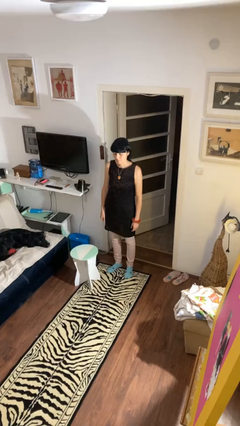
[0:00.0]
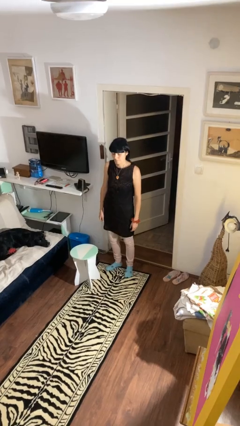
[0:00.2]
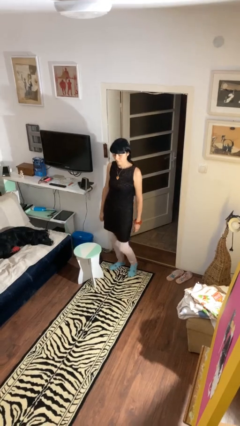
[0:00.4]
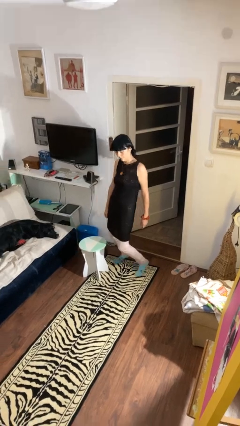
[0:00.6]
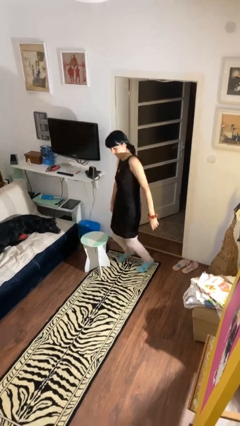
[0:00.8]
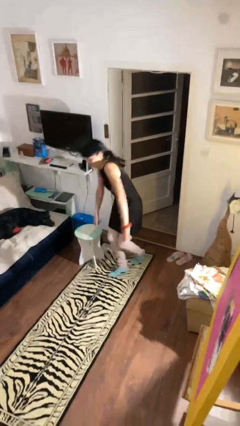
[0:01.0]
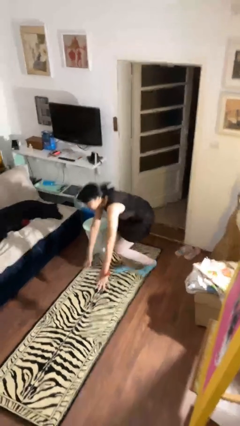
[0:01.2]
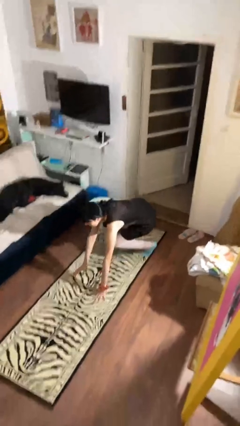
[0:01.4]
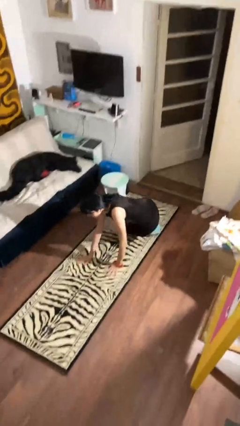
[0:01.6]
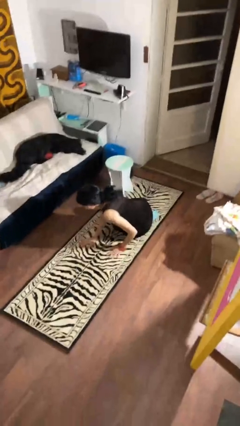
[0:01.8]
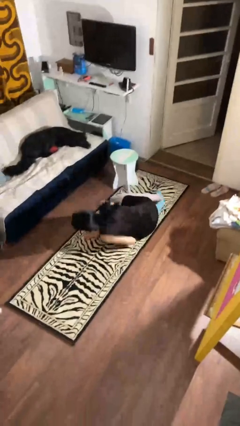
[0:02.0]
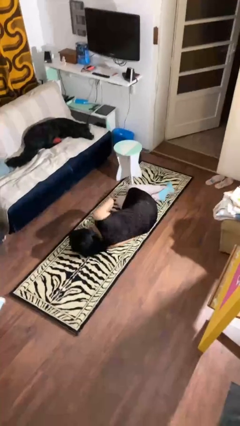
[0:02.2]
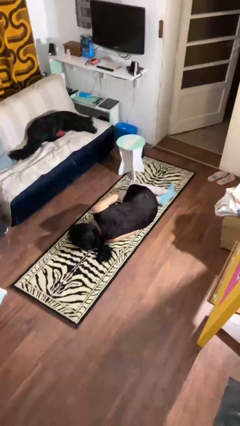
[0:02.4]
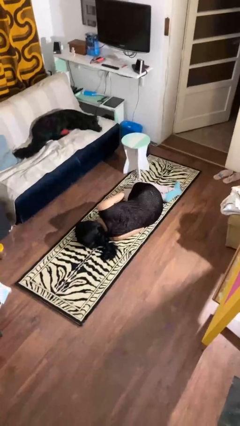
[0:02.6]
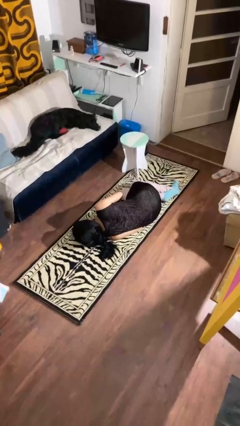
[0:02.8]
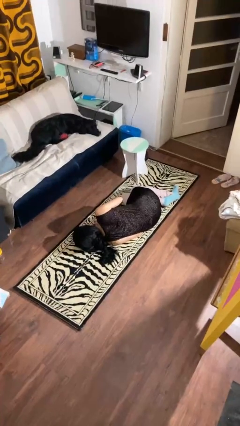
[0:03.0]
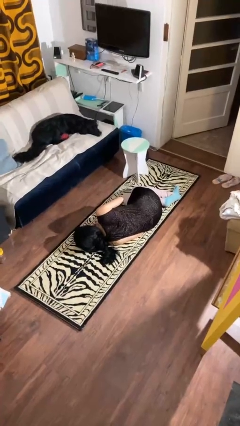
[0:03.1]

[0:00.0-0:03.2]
person trips on object on floor

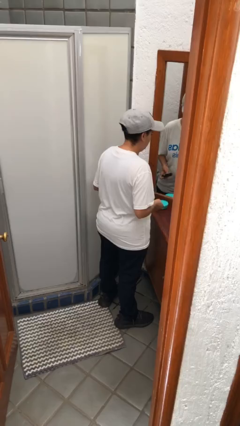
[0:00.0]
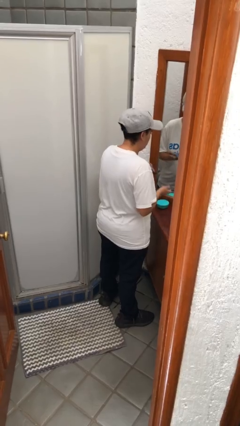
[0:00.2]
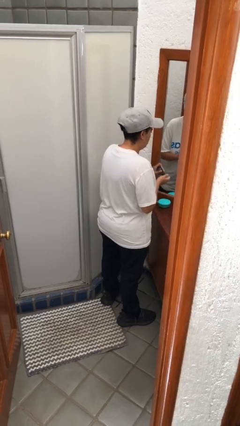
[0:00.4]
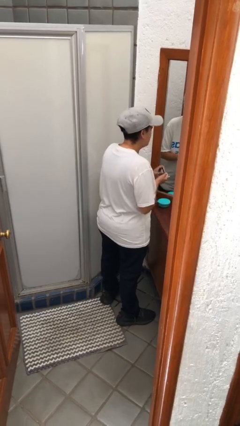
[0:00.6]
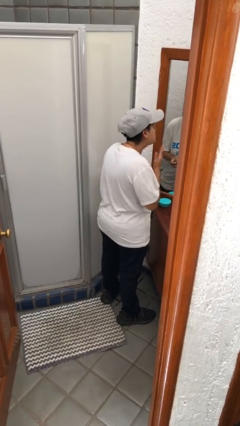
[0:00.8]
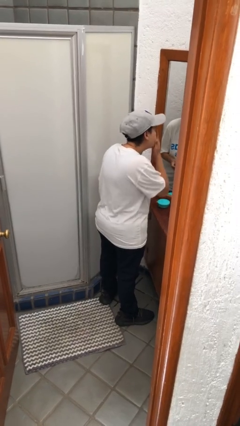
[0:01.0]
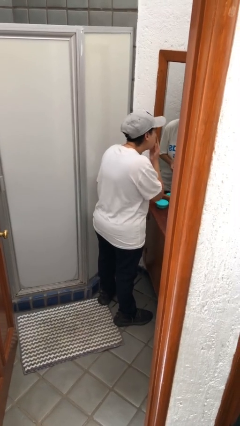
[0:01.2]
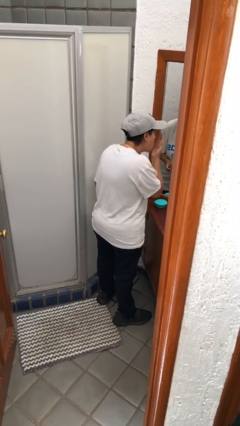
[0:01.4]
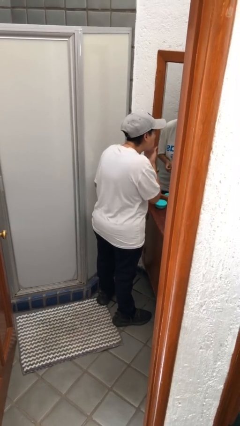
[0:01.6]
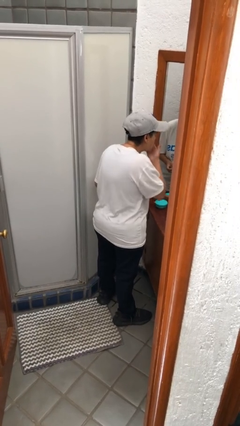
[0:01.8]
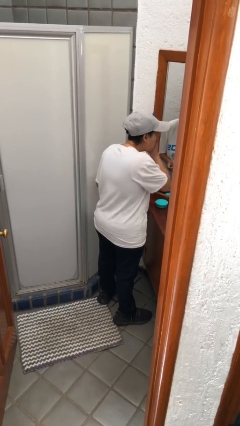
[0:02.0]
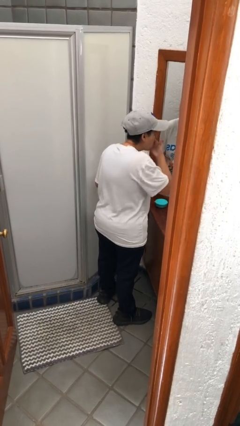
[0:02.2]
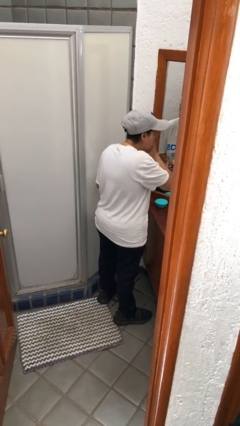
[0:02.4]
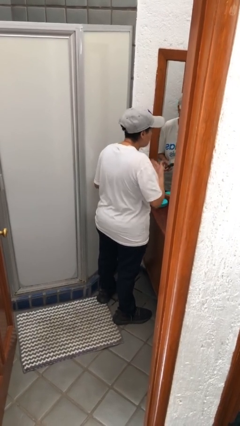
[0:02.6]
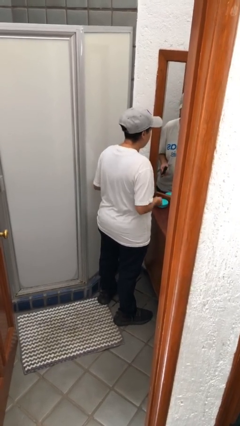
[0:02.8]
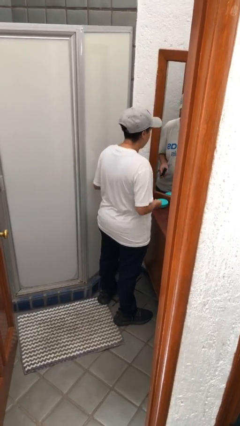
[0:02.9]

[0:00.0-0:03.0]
person applies facial moisturizer

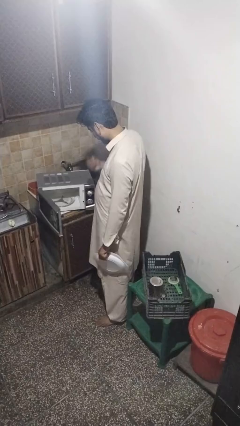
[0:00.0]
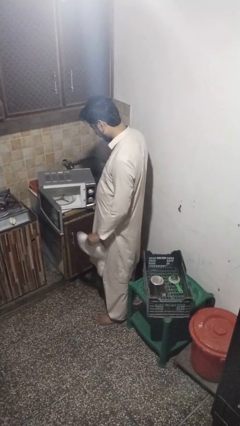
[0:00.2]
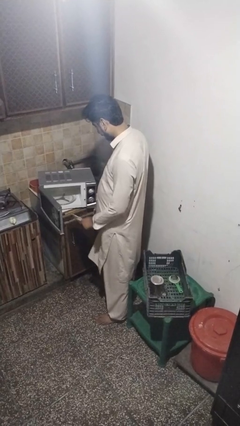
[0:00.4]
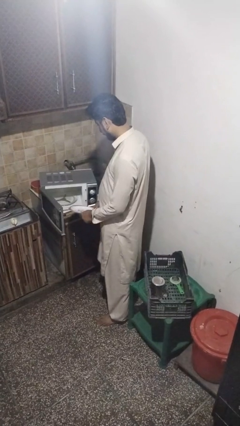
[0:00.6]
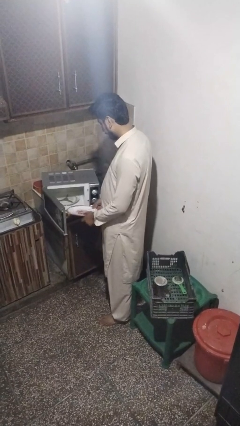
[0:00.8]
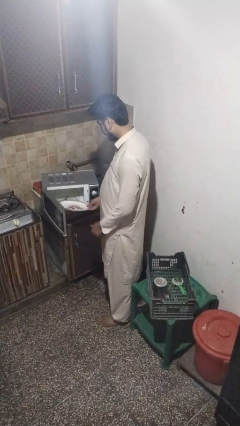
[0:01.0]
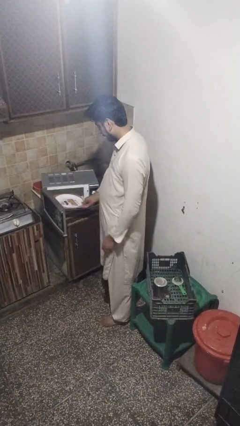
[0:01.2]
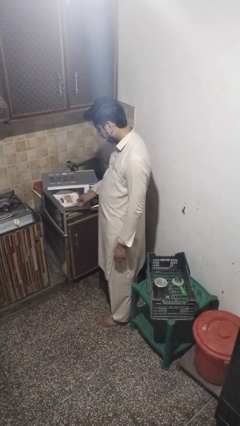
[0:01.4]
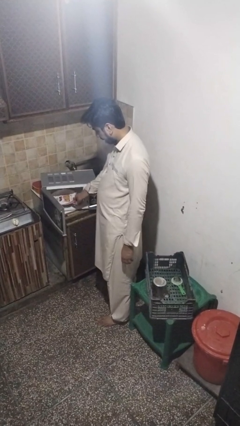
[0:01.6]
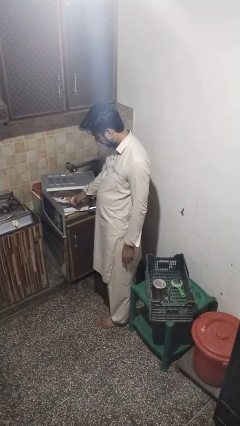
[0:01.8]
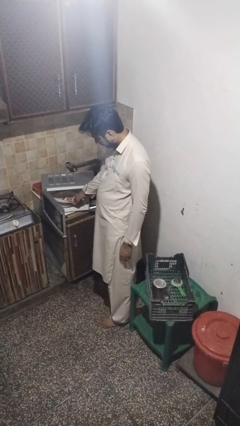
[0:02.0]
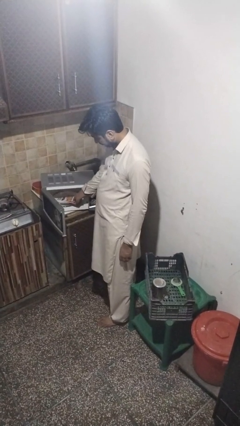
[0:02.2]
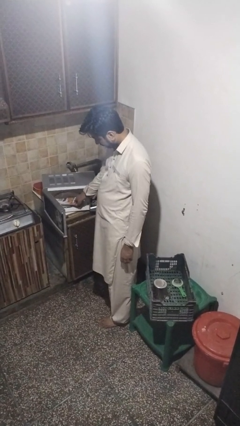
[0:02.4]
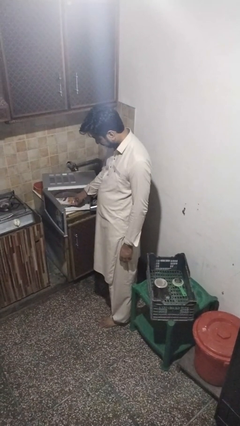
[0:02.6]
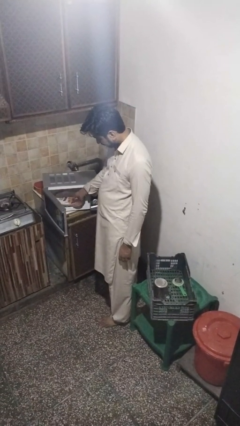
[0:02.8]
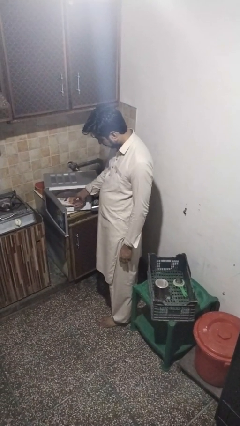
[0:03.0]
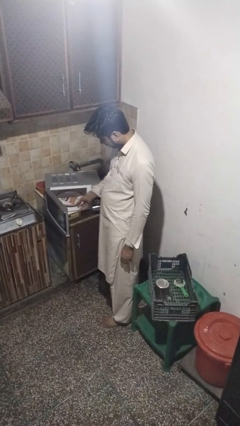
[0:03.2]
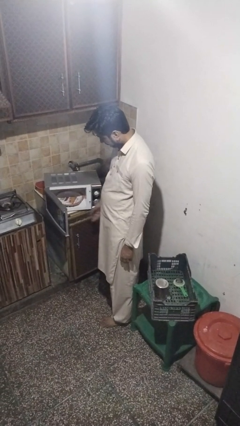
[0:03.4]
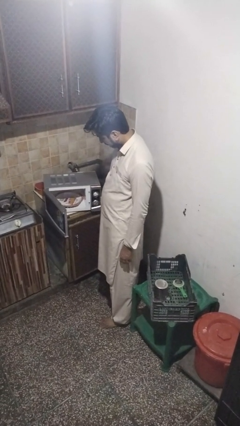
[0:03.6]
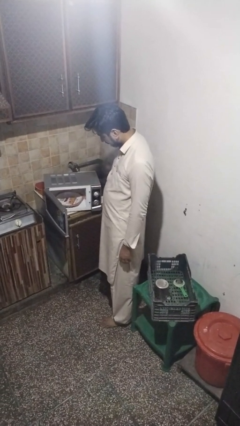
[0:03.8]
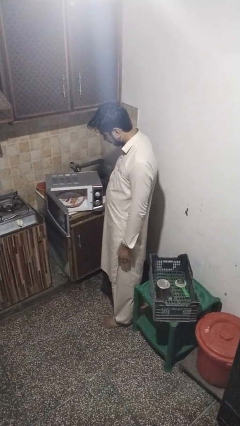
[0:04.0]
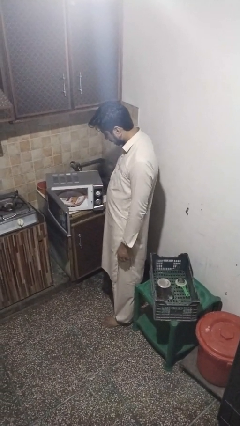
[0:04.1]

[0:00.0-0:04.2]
person puts object into microwave

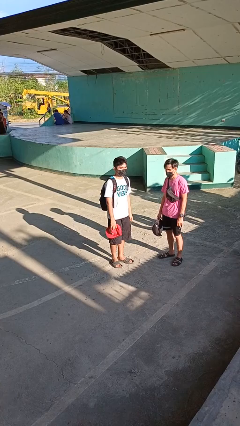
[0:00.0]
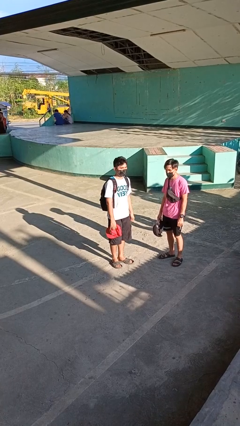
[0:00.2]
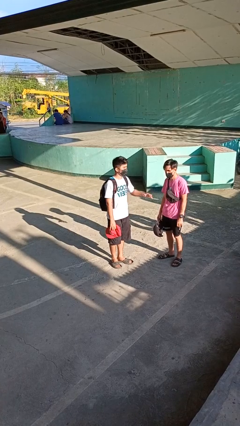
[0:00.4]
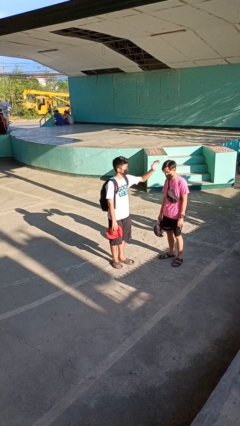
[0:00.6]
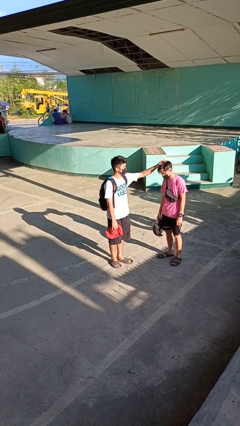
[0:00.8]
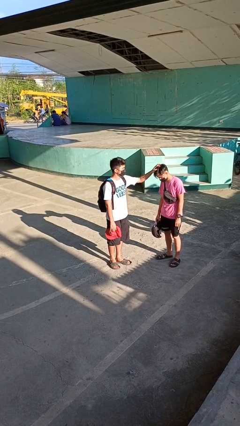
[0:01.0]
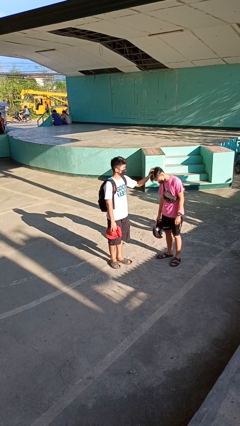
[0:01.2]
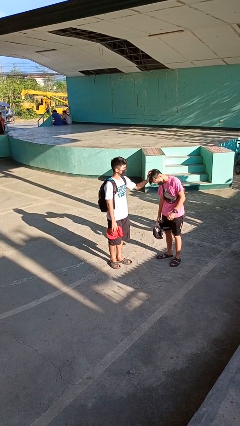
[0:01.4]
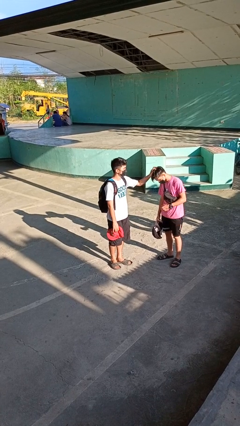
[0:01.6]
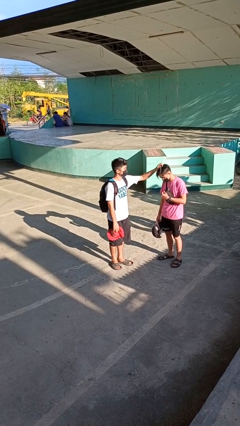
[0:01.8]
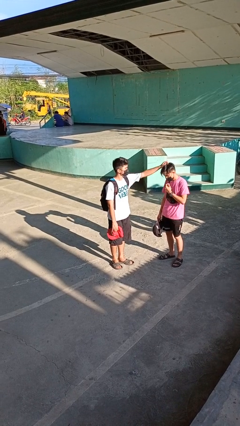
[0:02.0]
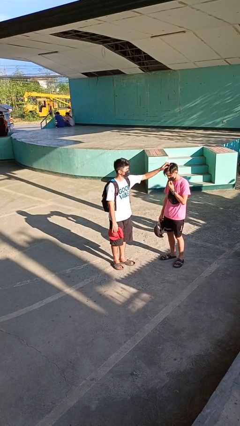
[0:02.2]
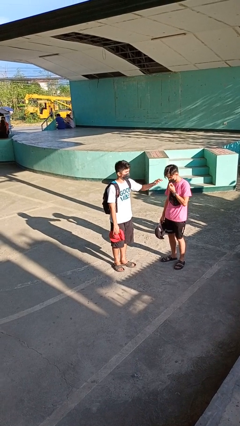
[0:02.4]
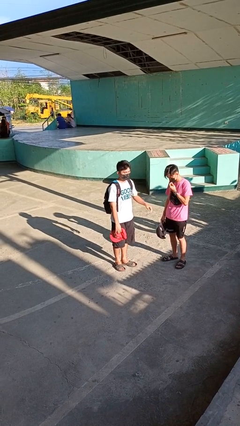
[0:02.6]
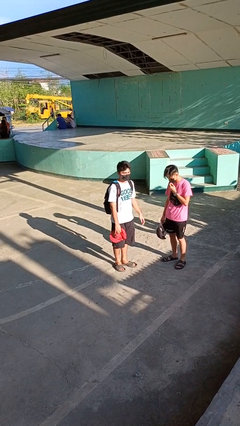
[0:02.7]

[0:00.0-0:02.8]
person grabs person by hair

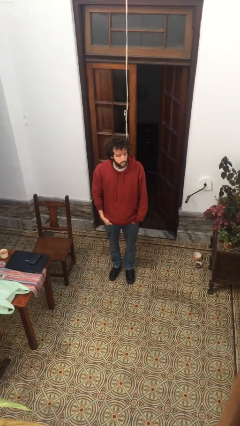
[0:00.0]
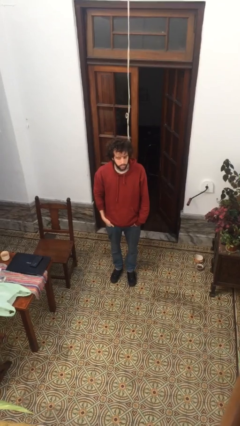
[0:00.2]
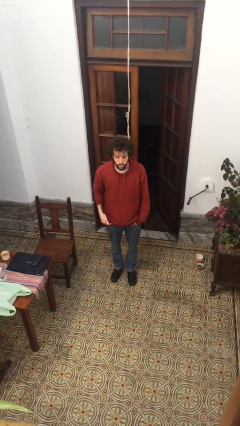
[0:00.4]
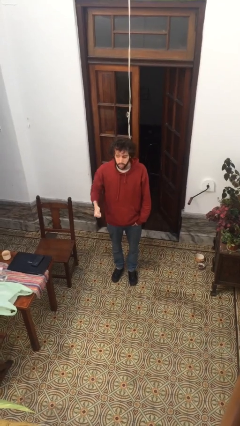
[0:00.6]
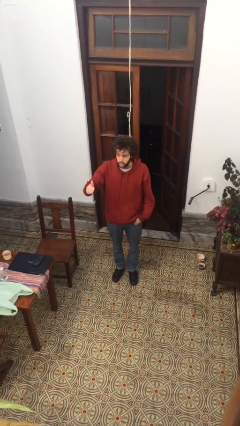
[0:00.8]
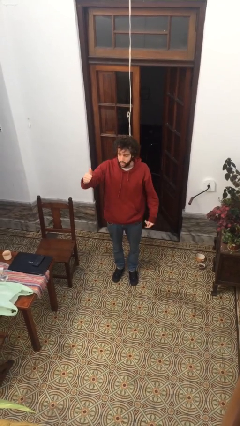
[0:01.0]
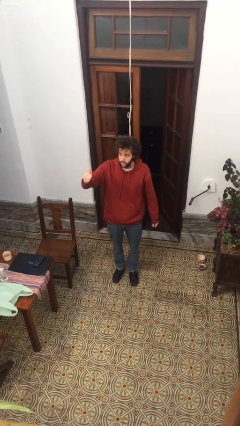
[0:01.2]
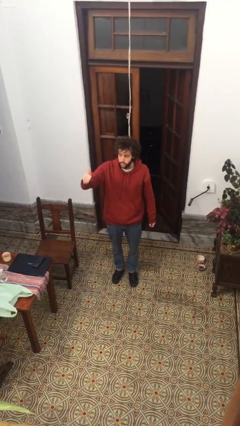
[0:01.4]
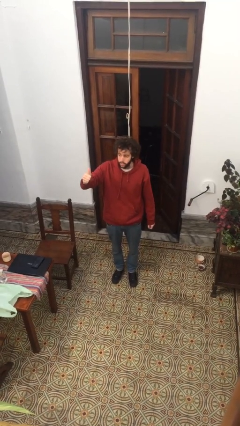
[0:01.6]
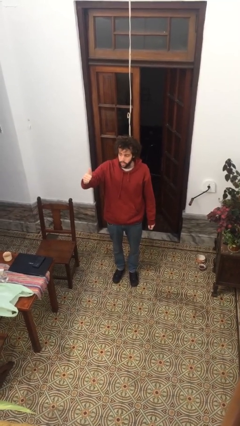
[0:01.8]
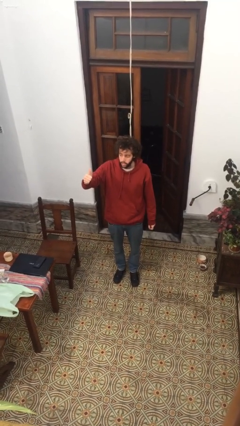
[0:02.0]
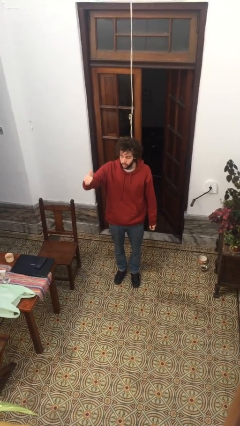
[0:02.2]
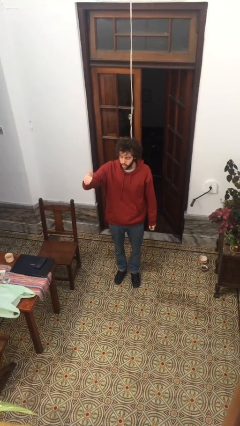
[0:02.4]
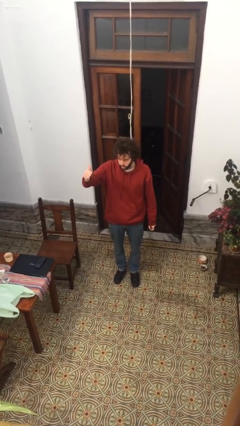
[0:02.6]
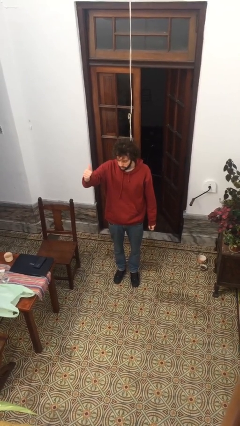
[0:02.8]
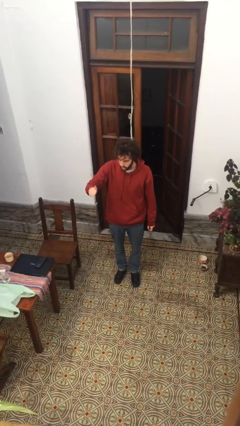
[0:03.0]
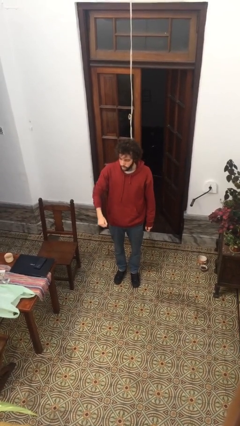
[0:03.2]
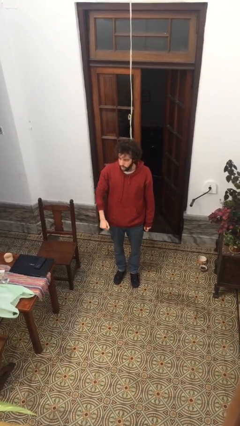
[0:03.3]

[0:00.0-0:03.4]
person gestures thumbs up

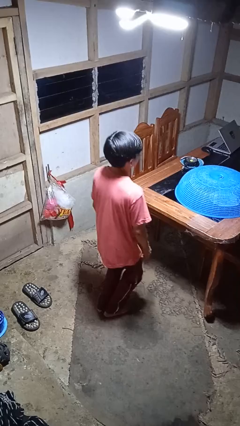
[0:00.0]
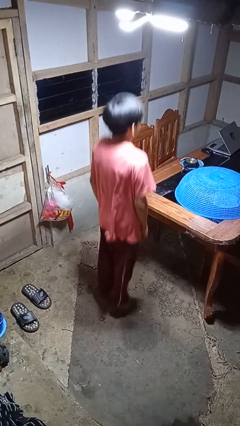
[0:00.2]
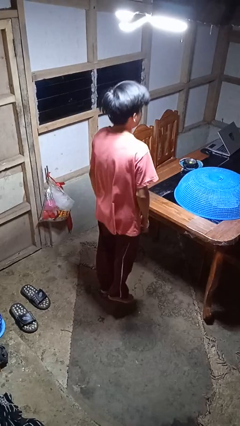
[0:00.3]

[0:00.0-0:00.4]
person jumps

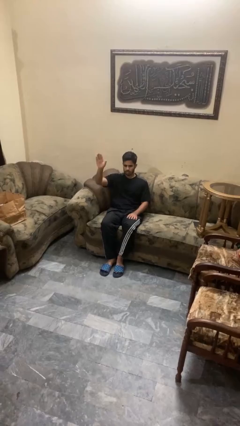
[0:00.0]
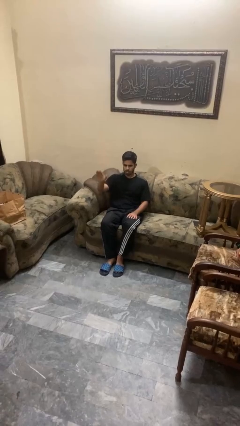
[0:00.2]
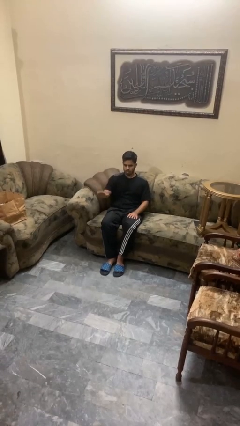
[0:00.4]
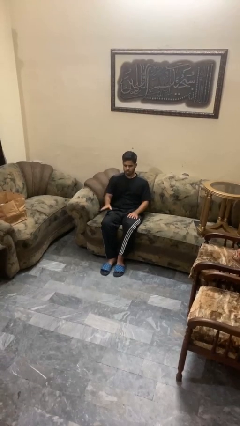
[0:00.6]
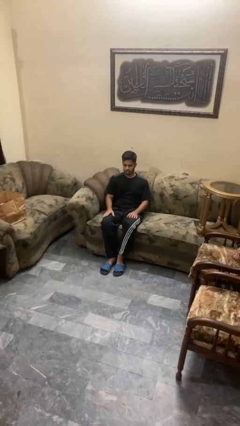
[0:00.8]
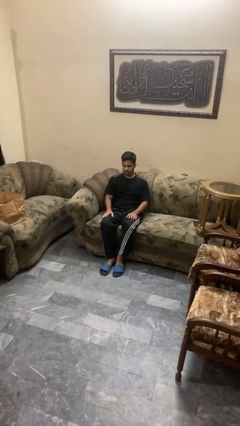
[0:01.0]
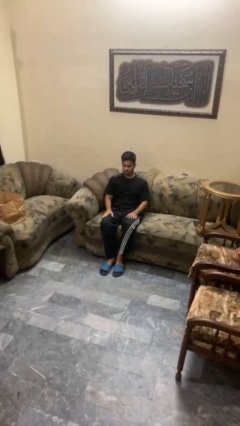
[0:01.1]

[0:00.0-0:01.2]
person gestures lower hand
